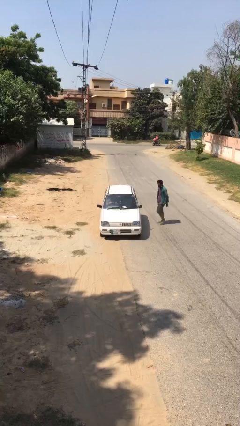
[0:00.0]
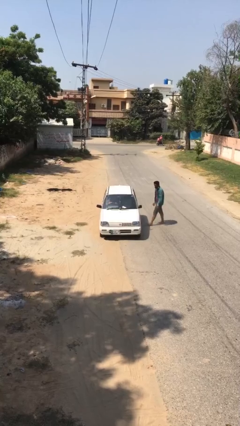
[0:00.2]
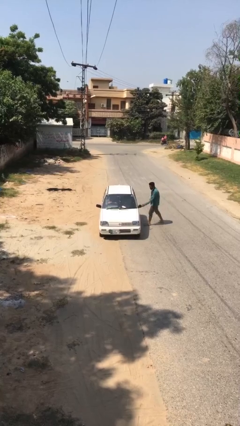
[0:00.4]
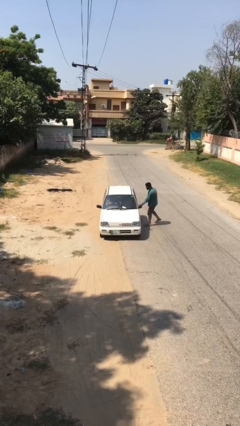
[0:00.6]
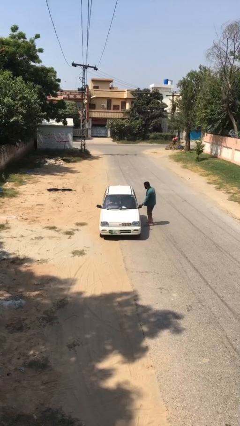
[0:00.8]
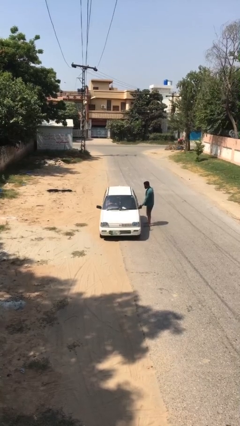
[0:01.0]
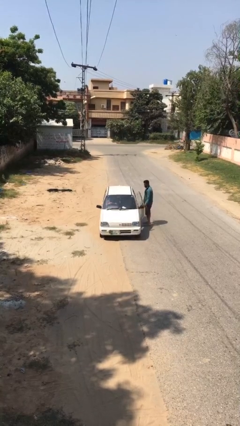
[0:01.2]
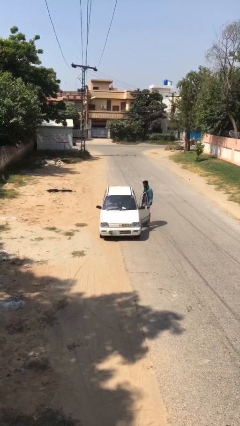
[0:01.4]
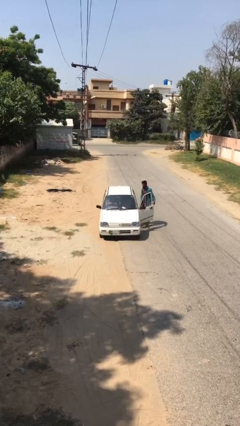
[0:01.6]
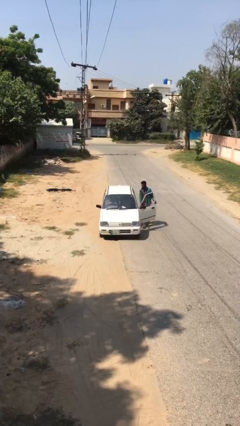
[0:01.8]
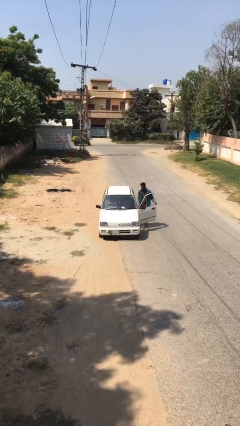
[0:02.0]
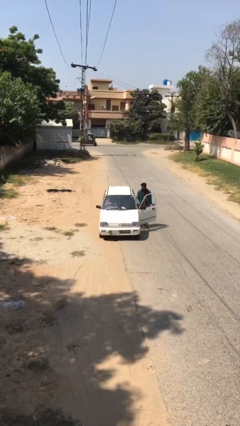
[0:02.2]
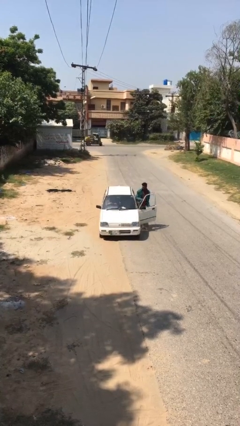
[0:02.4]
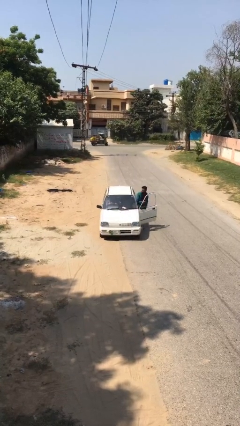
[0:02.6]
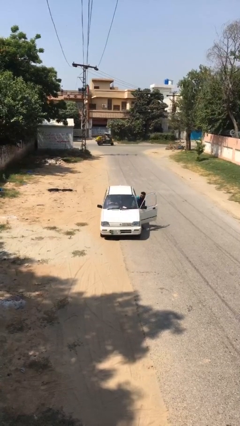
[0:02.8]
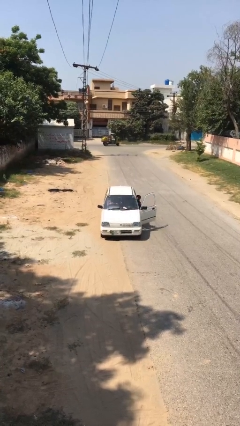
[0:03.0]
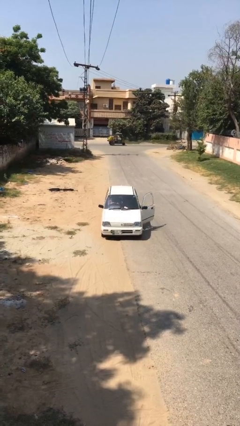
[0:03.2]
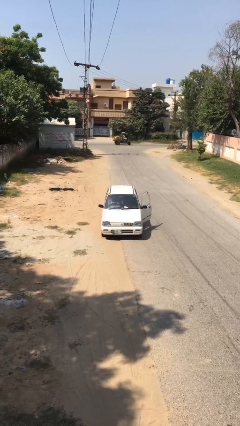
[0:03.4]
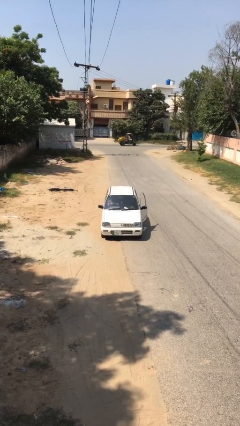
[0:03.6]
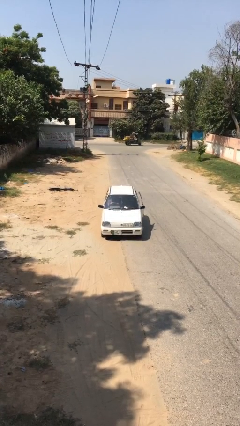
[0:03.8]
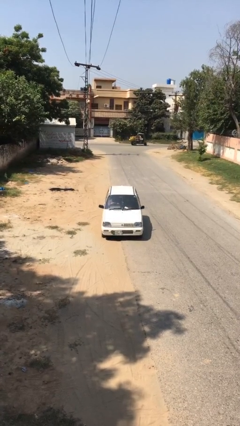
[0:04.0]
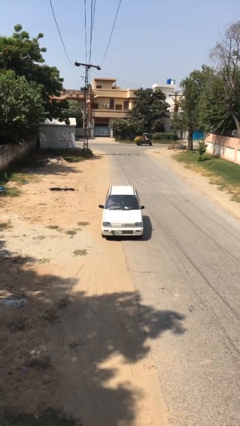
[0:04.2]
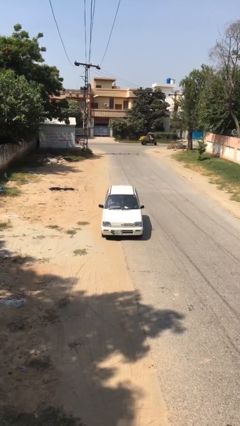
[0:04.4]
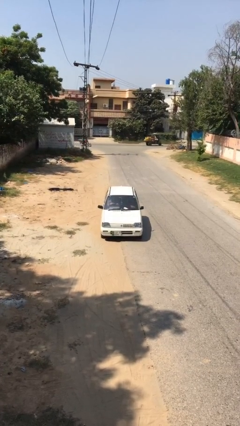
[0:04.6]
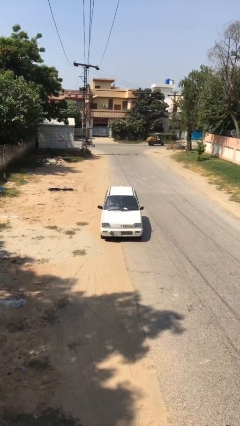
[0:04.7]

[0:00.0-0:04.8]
car picks up person

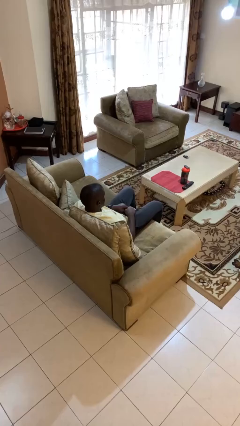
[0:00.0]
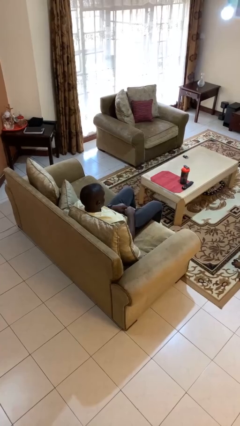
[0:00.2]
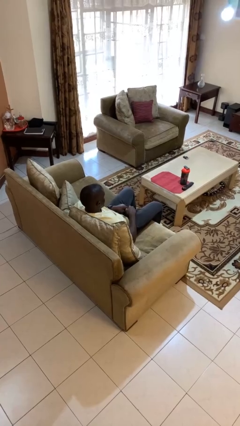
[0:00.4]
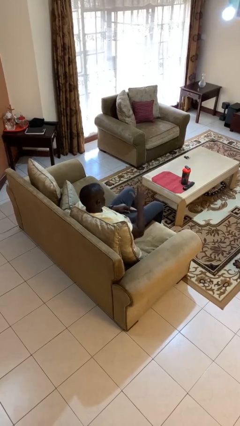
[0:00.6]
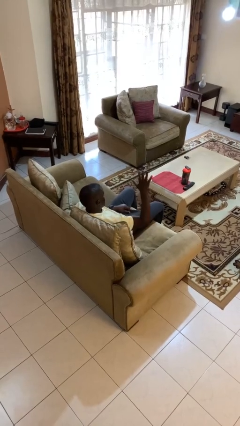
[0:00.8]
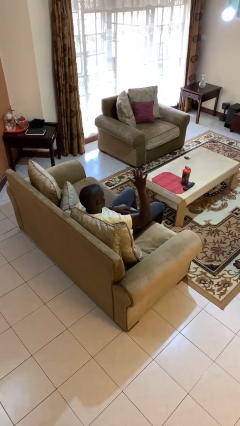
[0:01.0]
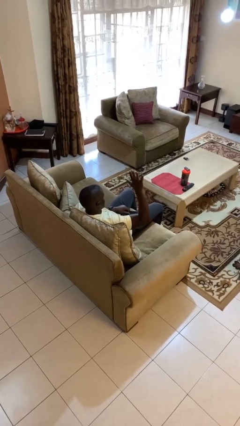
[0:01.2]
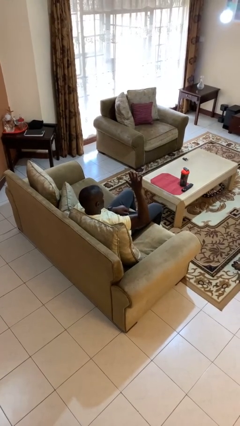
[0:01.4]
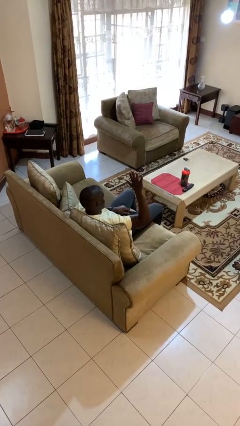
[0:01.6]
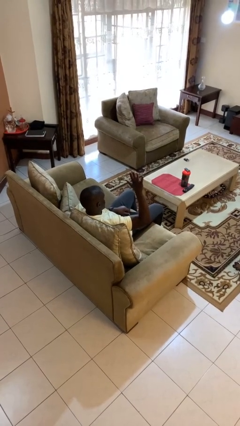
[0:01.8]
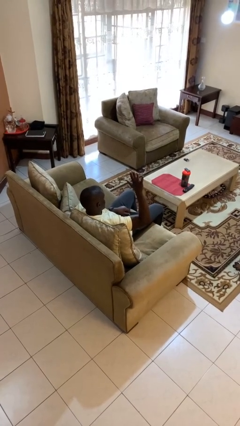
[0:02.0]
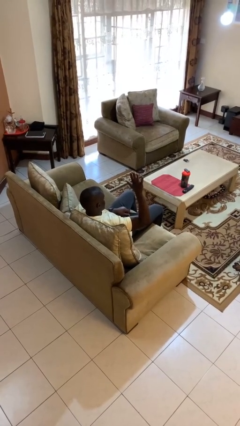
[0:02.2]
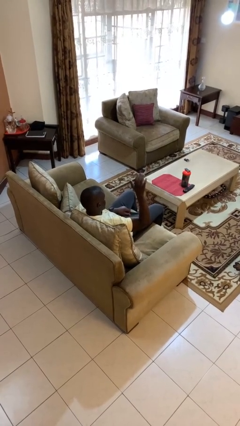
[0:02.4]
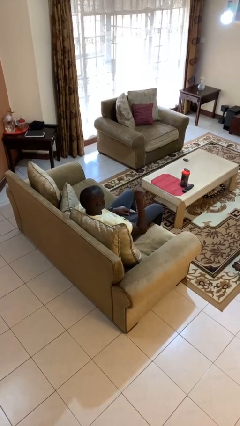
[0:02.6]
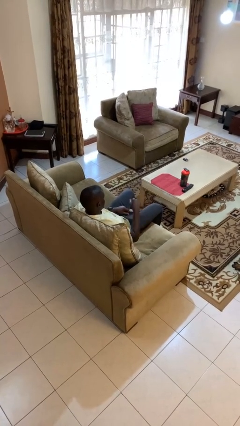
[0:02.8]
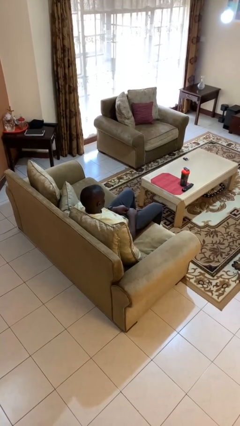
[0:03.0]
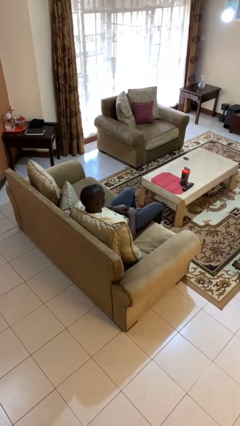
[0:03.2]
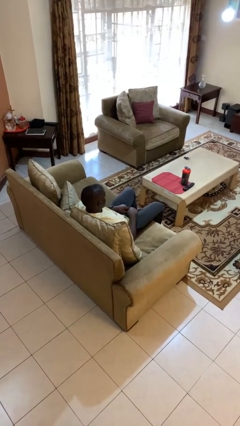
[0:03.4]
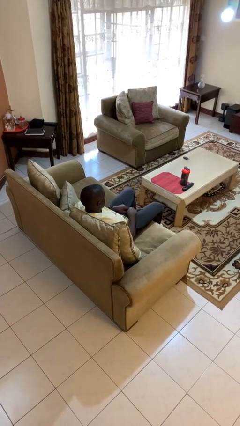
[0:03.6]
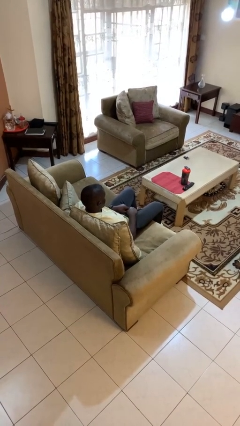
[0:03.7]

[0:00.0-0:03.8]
person gestures number five

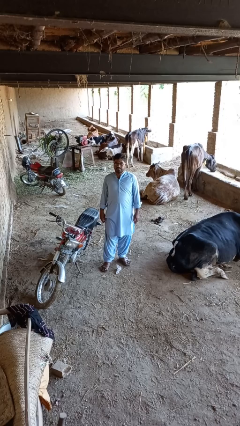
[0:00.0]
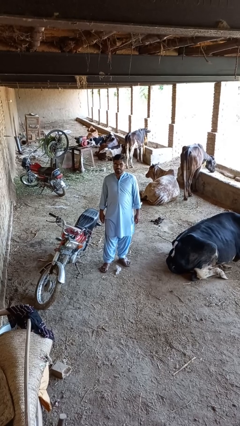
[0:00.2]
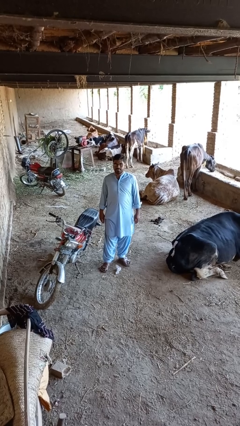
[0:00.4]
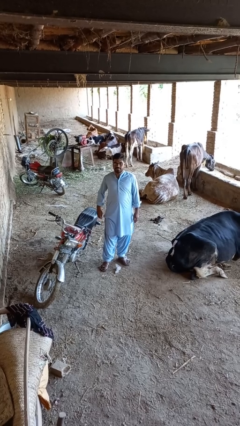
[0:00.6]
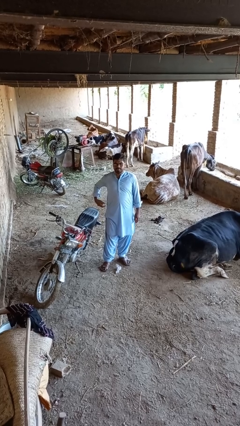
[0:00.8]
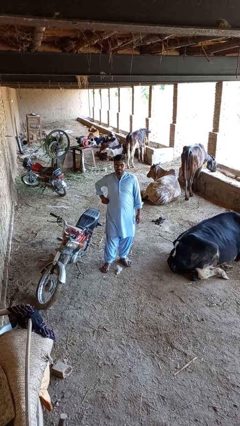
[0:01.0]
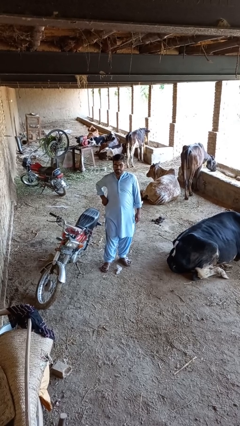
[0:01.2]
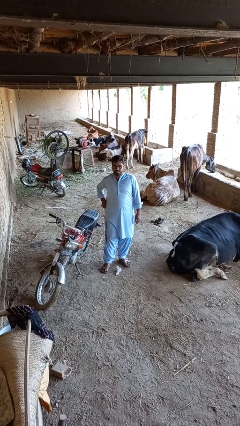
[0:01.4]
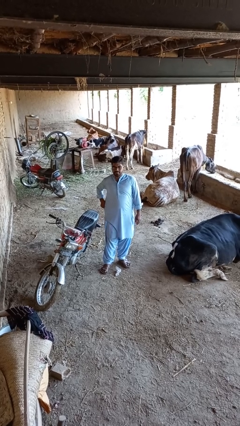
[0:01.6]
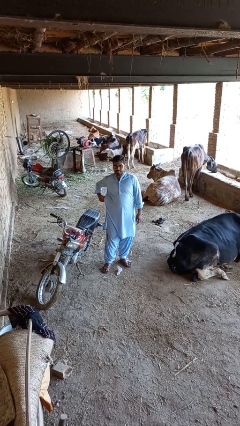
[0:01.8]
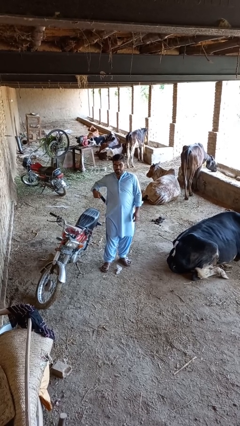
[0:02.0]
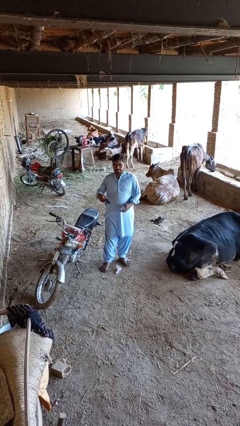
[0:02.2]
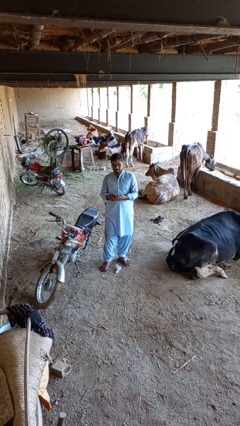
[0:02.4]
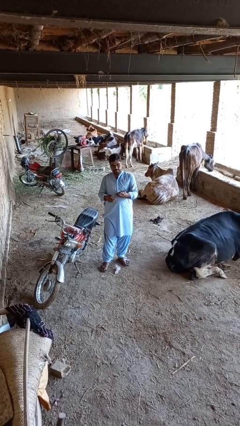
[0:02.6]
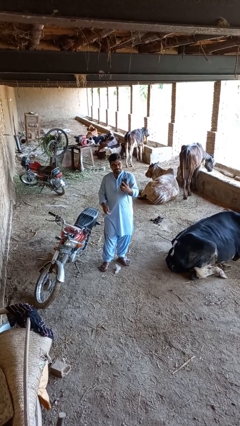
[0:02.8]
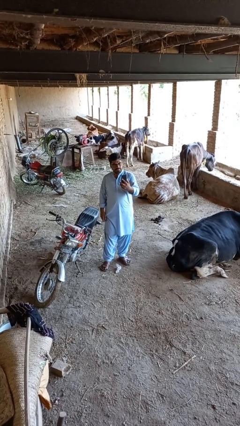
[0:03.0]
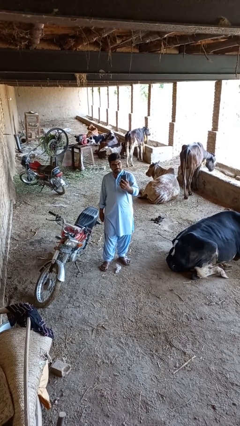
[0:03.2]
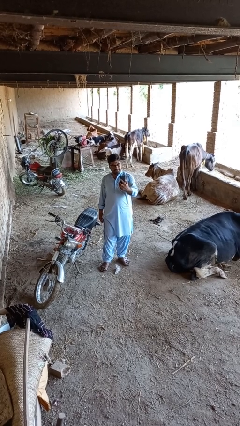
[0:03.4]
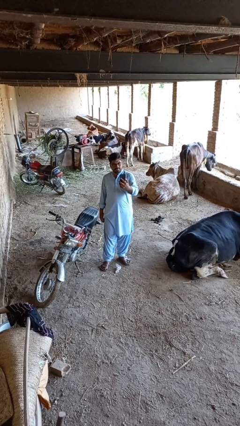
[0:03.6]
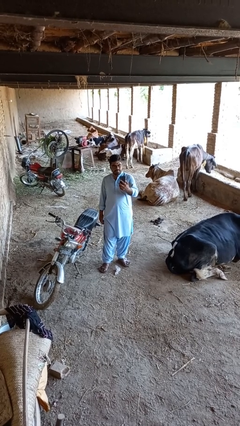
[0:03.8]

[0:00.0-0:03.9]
person takes phone from pocket

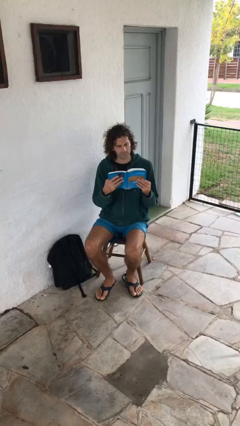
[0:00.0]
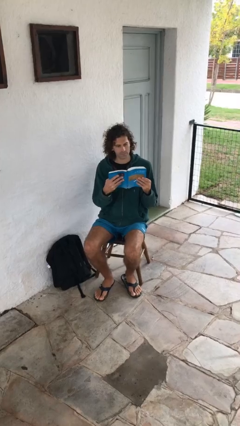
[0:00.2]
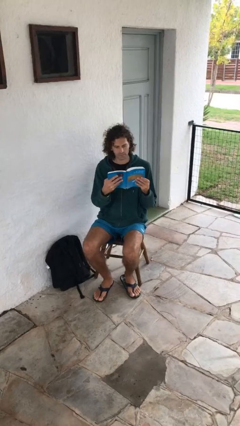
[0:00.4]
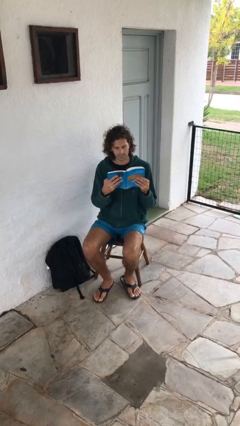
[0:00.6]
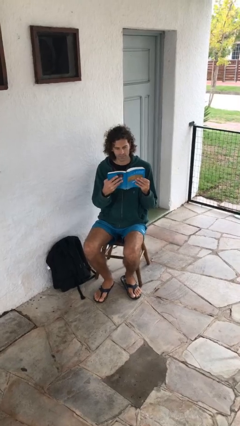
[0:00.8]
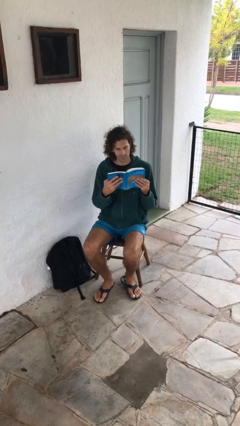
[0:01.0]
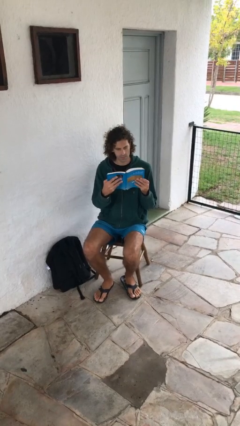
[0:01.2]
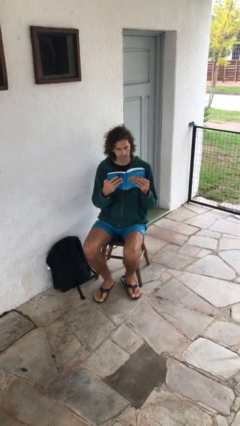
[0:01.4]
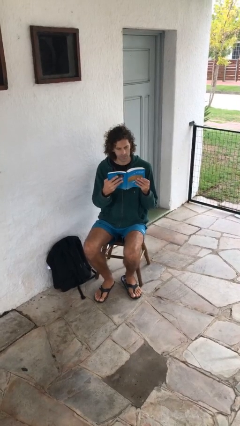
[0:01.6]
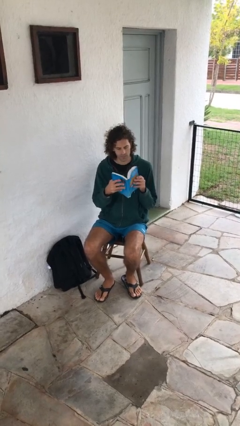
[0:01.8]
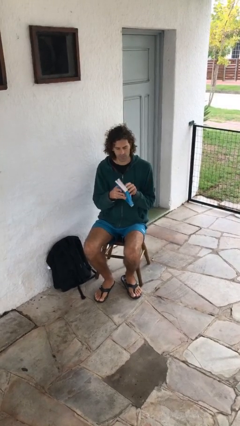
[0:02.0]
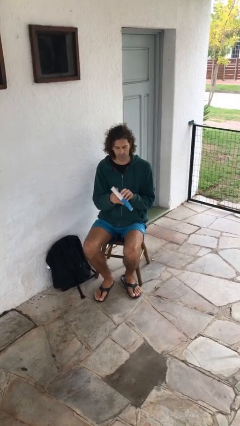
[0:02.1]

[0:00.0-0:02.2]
person reads document

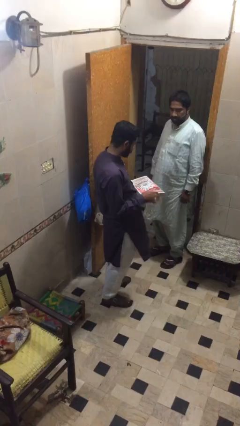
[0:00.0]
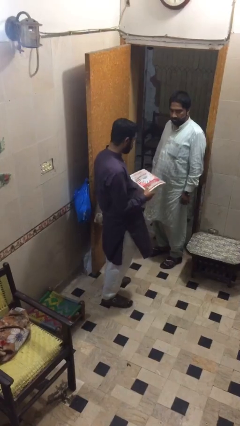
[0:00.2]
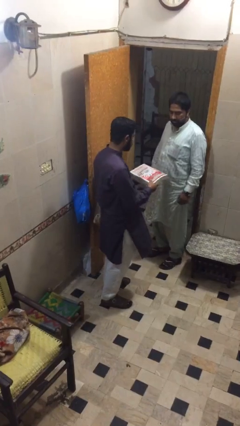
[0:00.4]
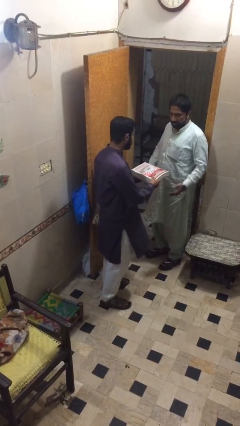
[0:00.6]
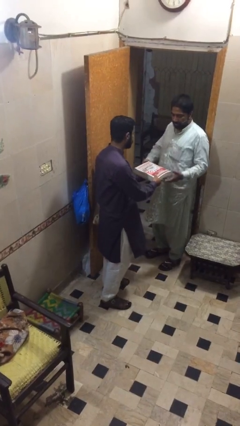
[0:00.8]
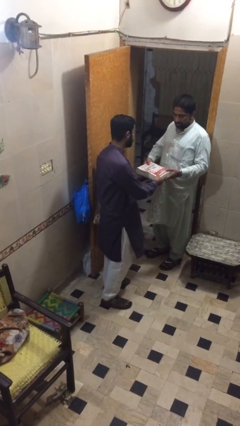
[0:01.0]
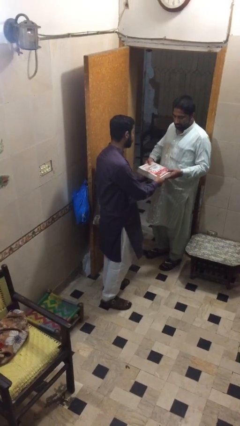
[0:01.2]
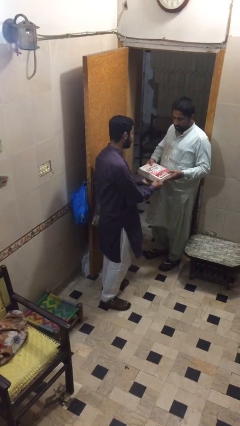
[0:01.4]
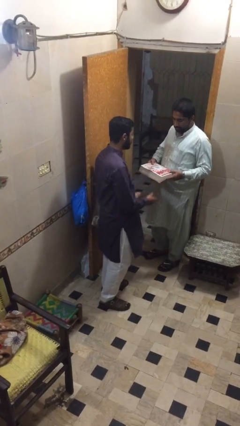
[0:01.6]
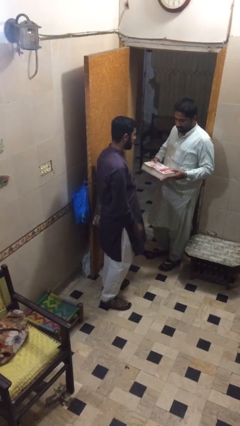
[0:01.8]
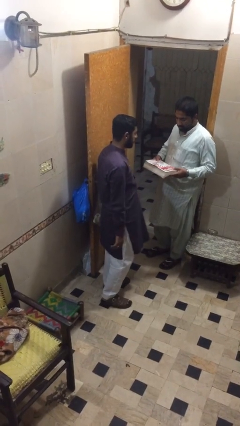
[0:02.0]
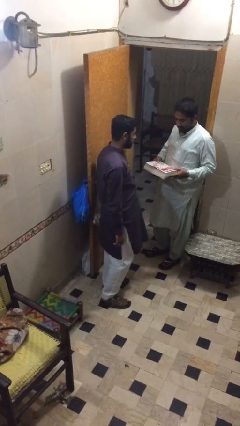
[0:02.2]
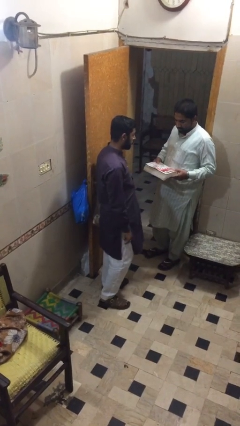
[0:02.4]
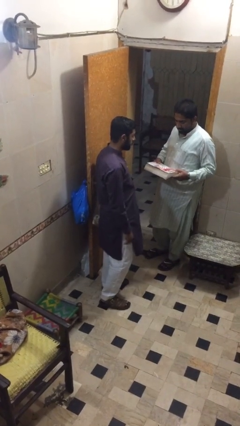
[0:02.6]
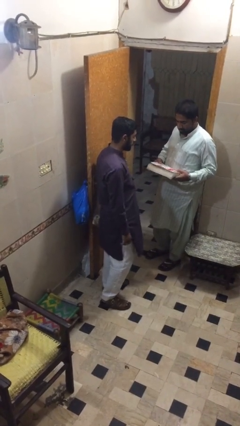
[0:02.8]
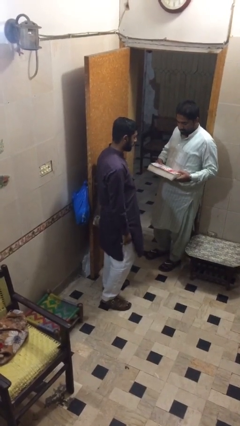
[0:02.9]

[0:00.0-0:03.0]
person transfers object to person
